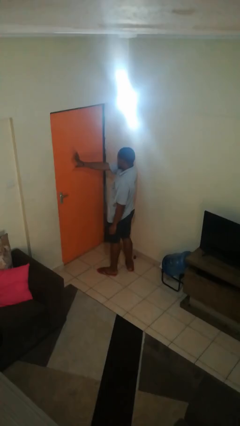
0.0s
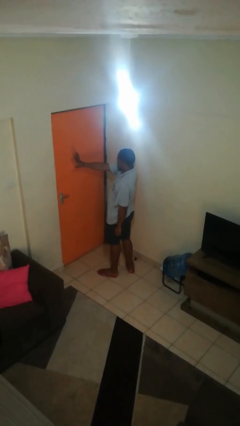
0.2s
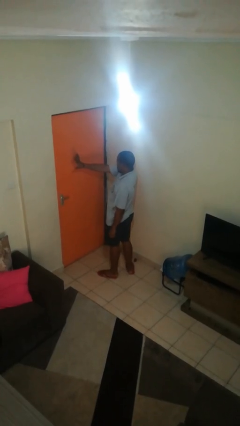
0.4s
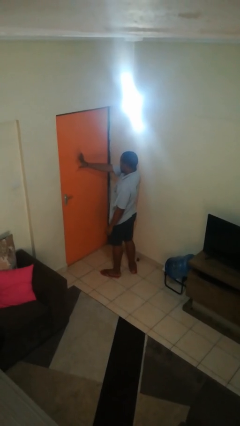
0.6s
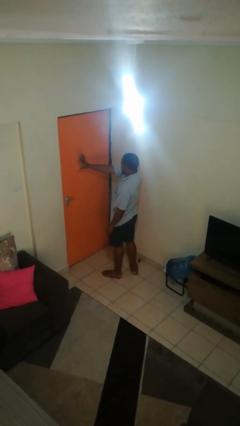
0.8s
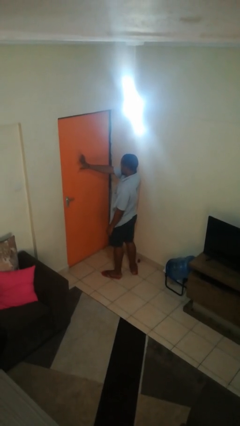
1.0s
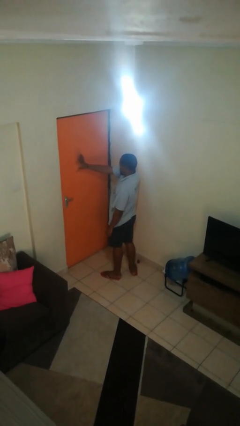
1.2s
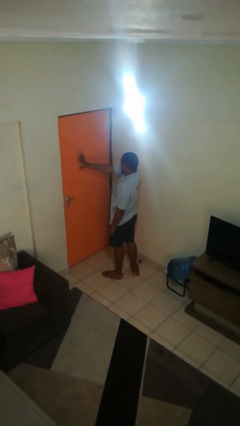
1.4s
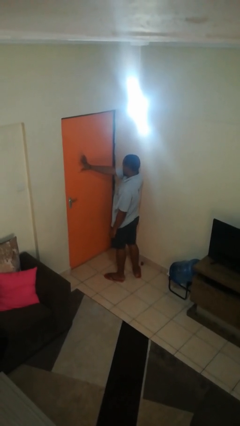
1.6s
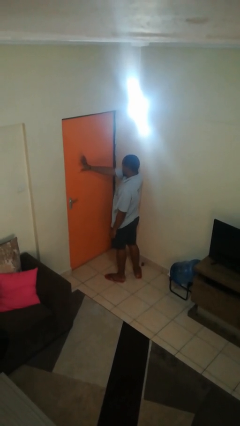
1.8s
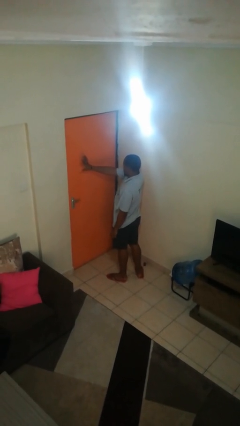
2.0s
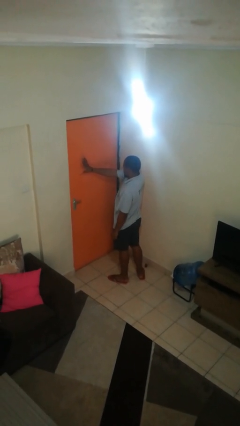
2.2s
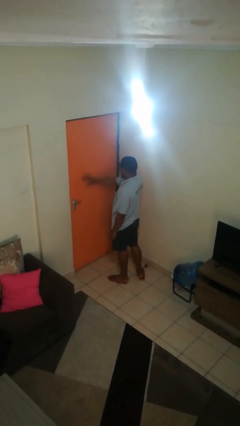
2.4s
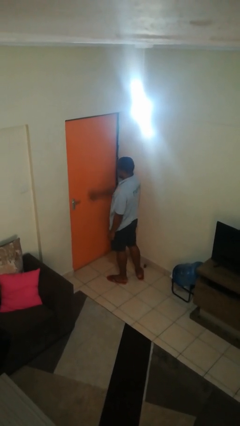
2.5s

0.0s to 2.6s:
person gestures number five

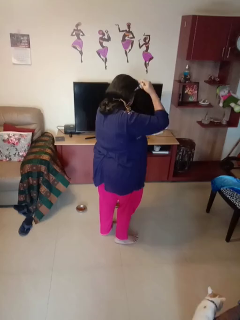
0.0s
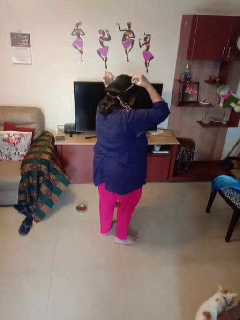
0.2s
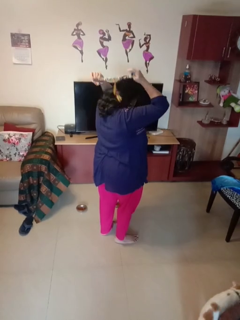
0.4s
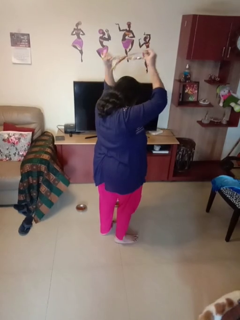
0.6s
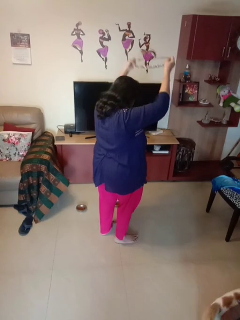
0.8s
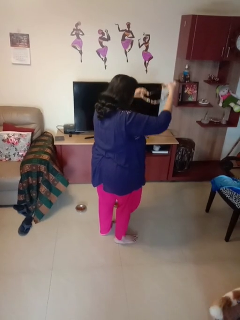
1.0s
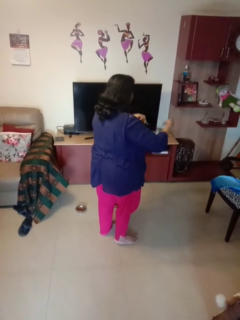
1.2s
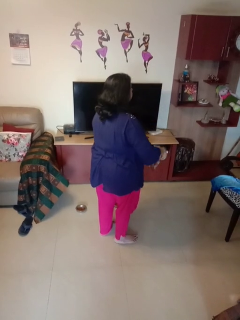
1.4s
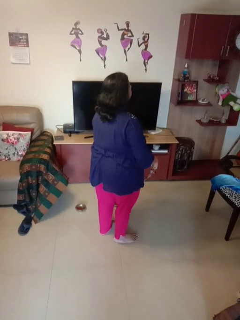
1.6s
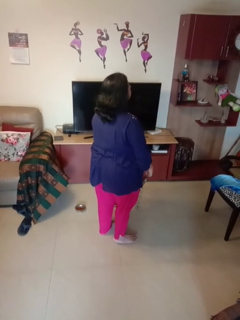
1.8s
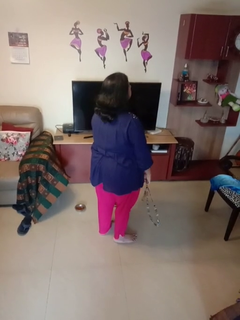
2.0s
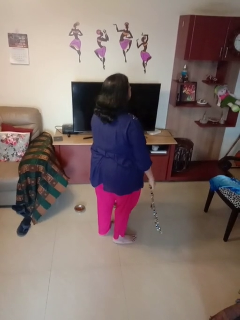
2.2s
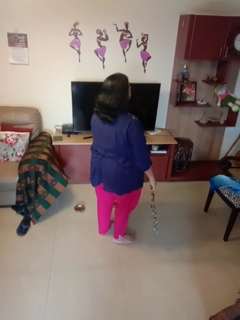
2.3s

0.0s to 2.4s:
person takes off necklace

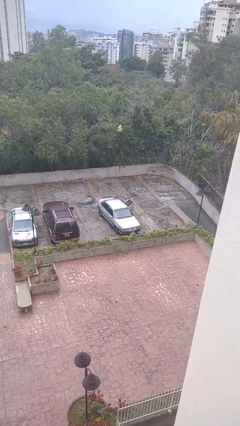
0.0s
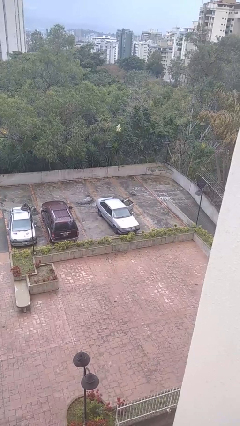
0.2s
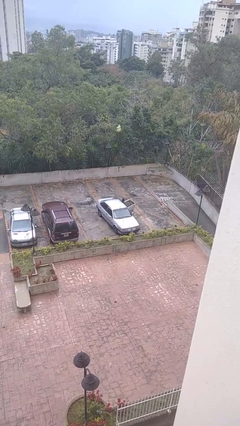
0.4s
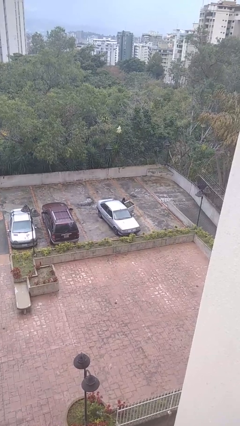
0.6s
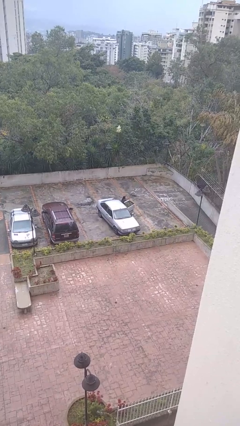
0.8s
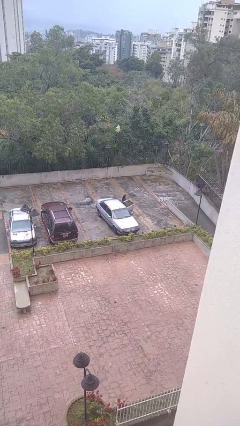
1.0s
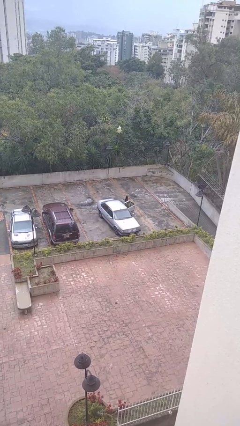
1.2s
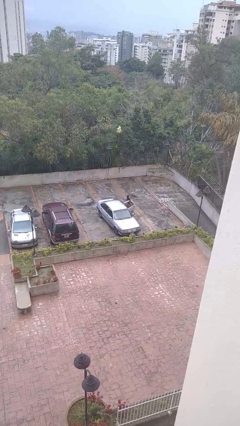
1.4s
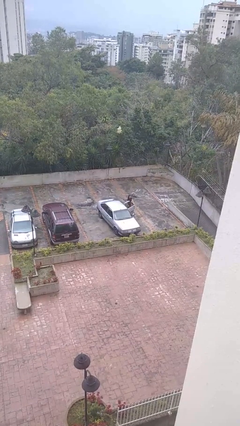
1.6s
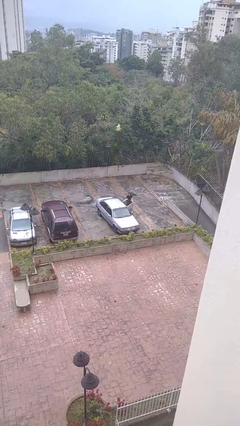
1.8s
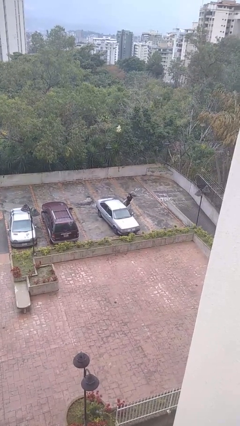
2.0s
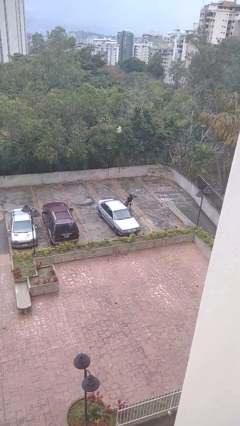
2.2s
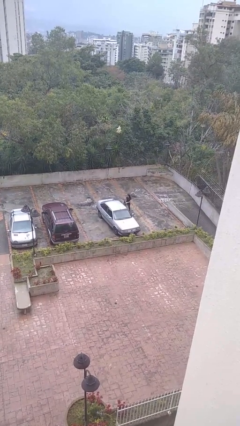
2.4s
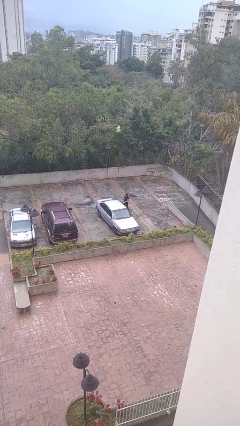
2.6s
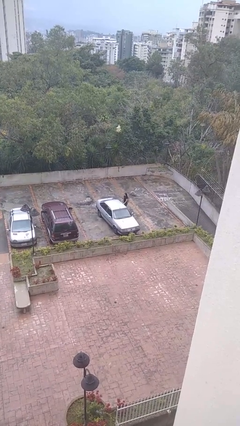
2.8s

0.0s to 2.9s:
car drops off person

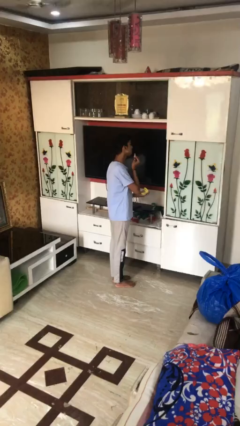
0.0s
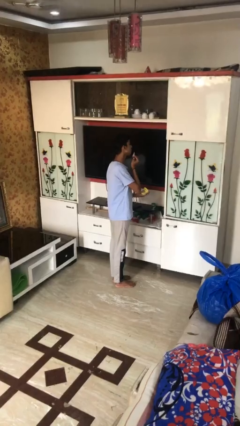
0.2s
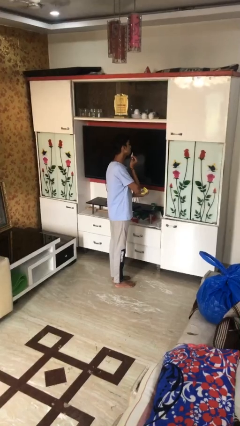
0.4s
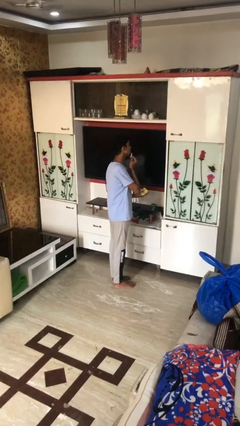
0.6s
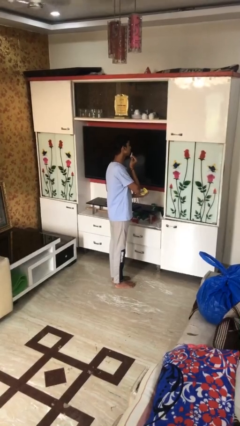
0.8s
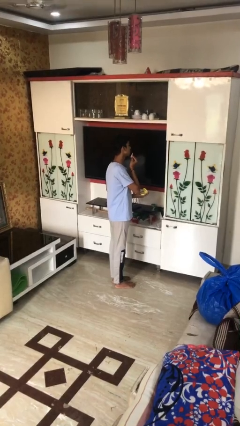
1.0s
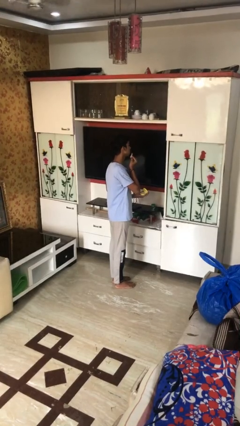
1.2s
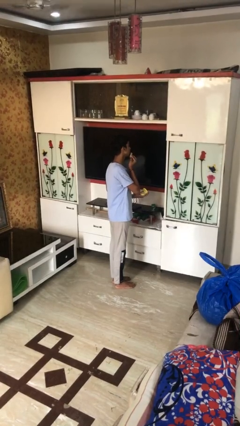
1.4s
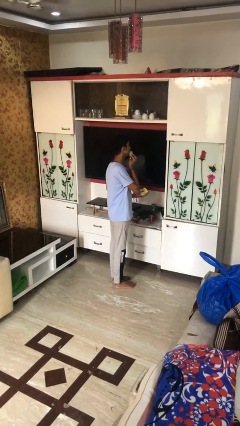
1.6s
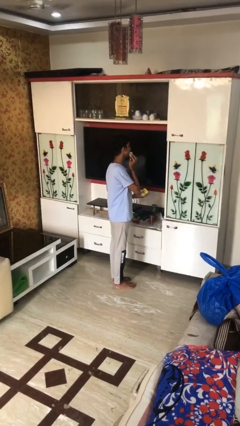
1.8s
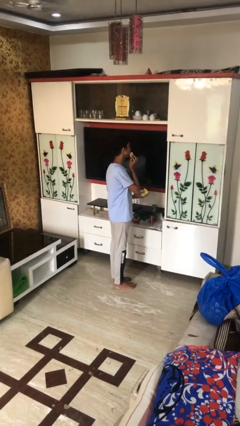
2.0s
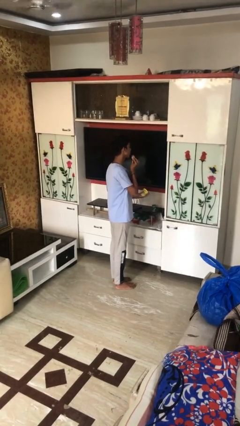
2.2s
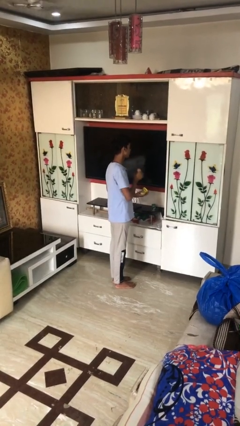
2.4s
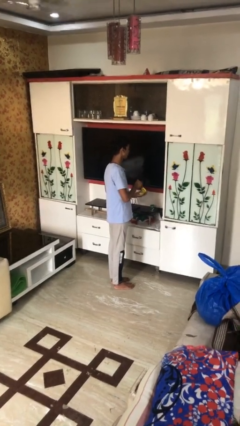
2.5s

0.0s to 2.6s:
person applies foundation makeup

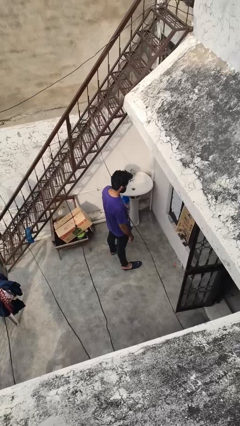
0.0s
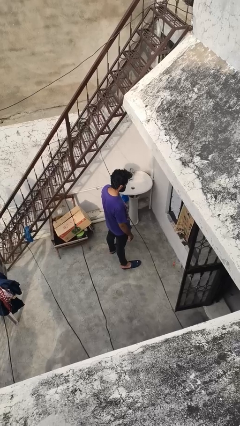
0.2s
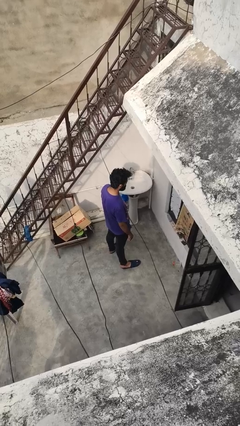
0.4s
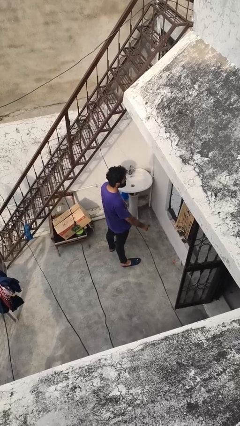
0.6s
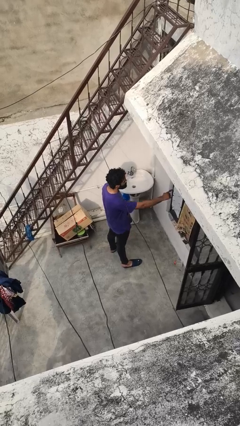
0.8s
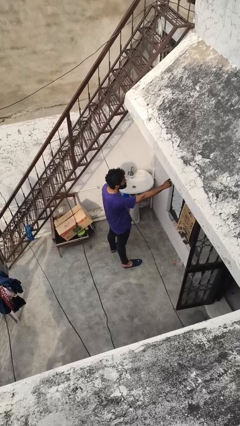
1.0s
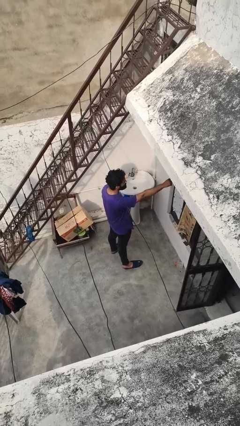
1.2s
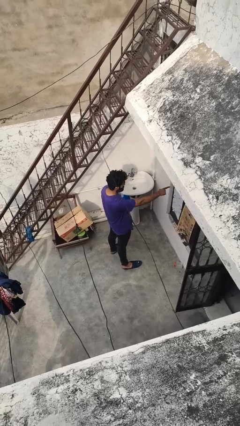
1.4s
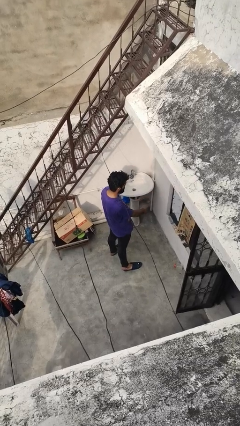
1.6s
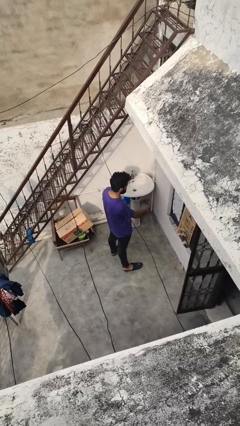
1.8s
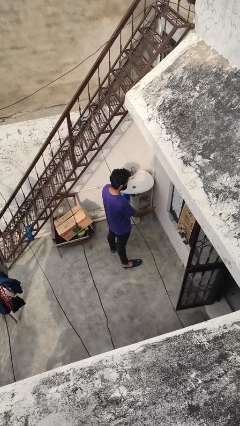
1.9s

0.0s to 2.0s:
person gestures behind me

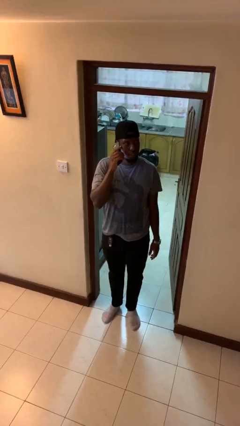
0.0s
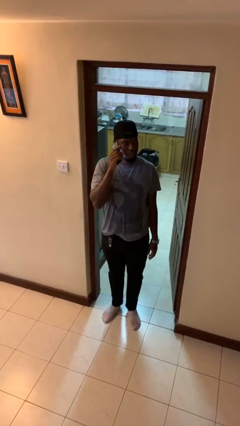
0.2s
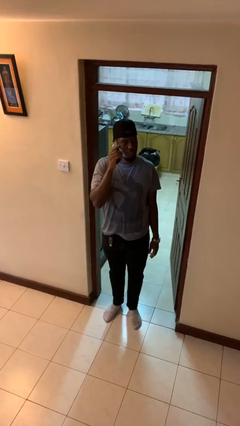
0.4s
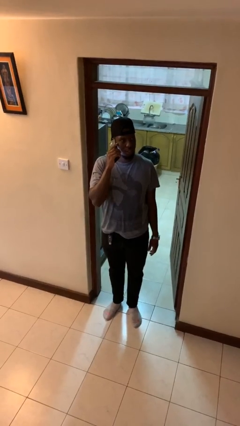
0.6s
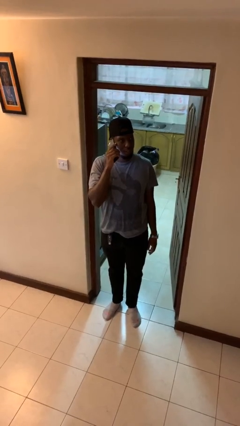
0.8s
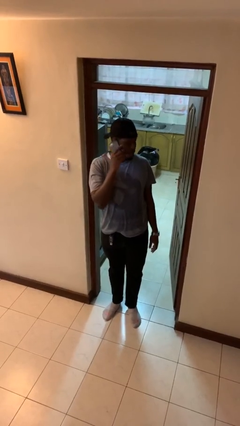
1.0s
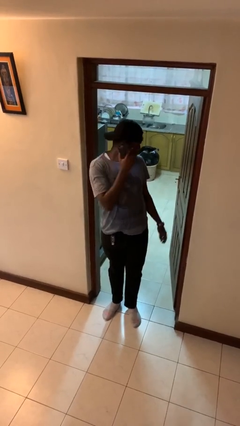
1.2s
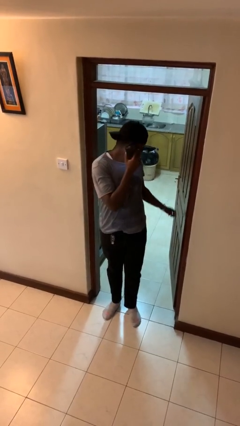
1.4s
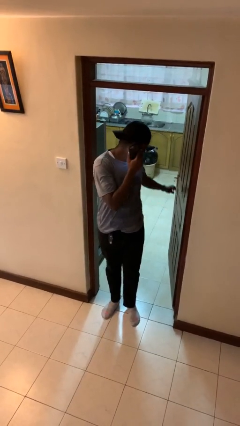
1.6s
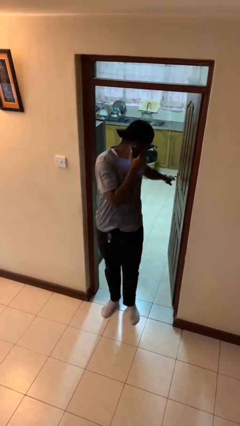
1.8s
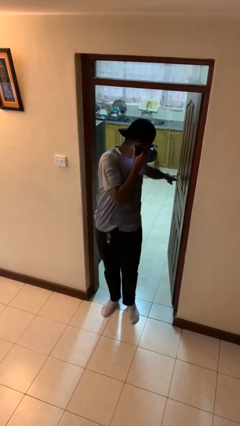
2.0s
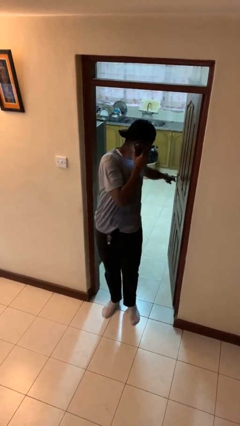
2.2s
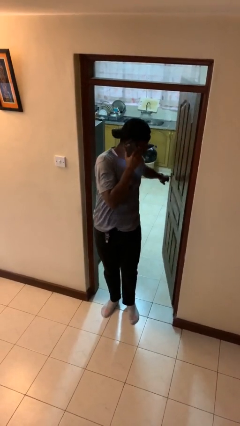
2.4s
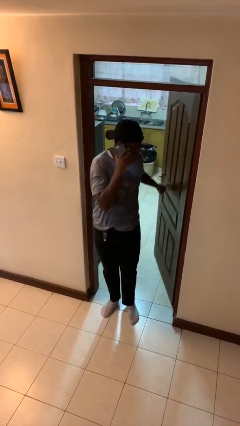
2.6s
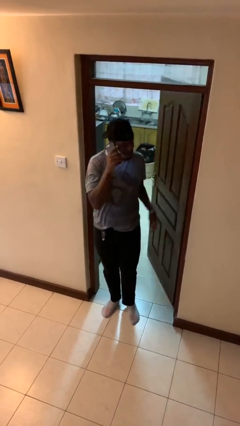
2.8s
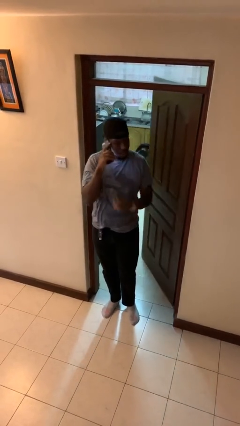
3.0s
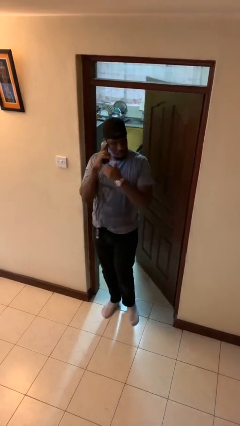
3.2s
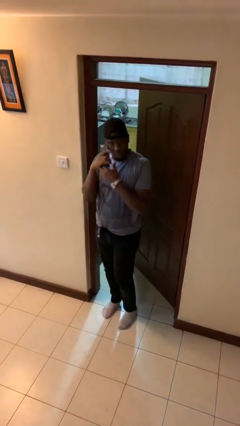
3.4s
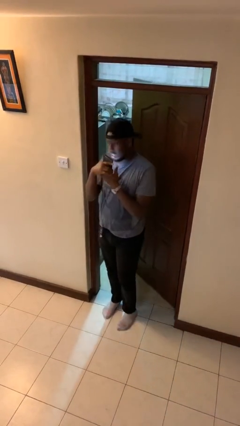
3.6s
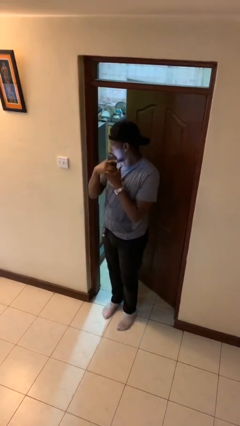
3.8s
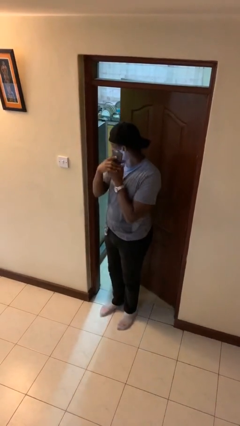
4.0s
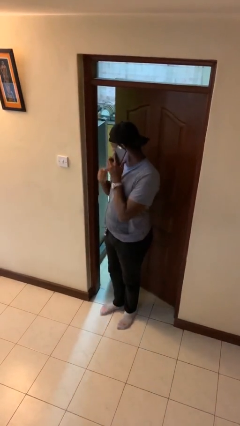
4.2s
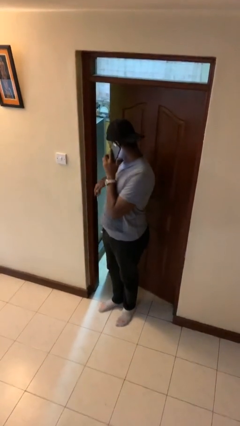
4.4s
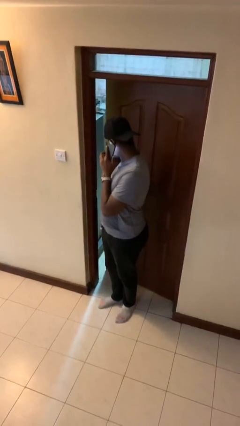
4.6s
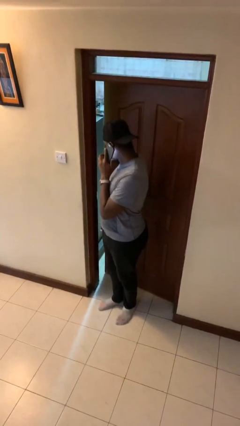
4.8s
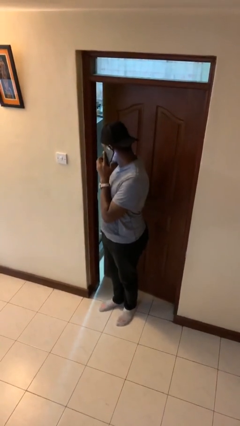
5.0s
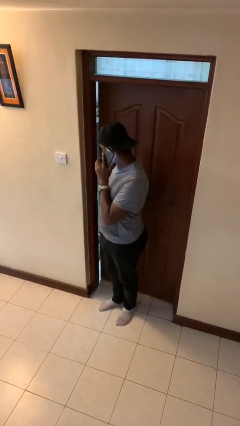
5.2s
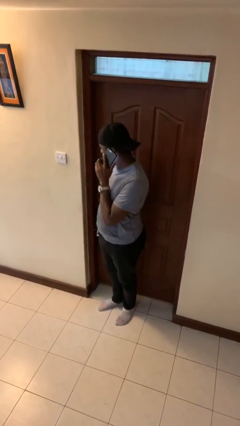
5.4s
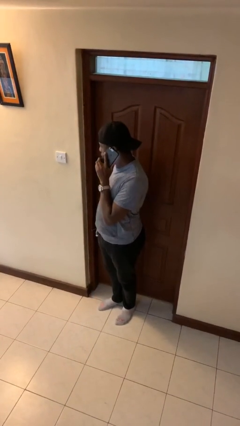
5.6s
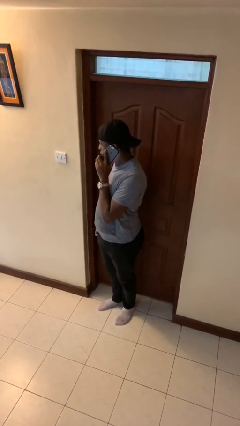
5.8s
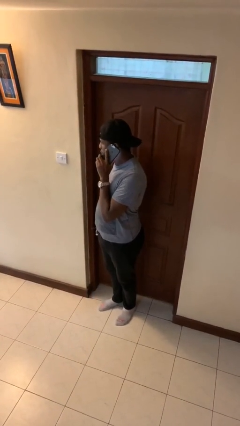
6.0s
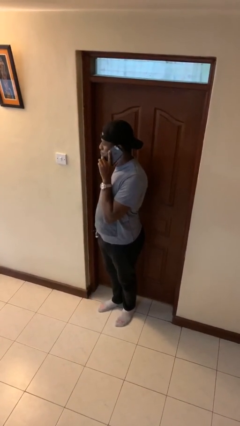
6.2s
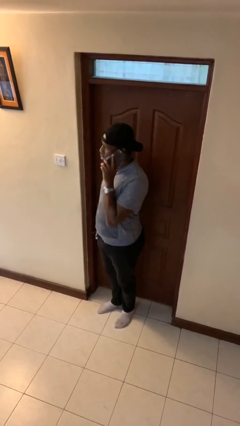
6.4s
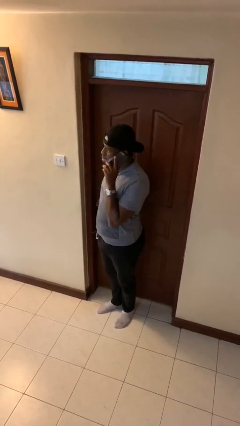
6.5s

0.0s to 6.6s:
person closes facility door
